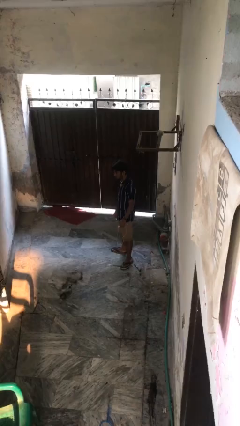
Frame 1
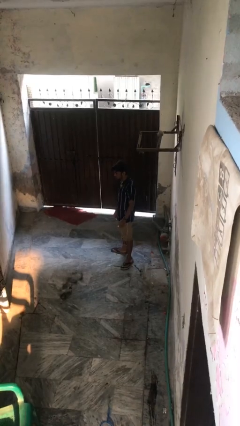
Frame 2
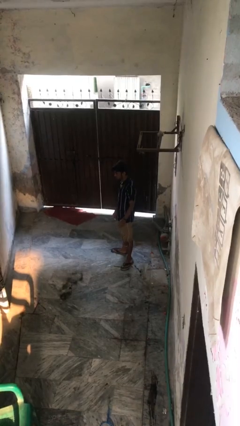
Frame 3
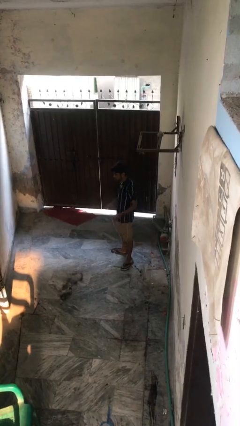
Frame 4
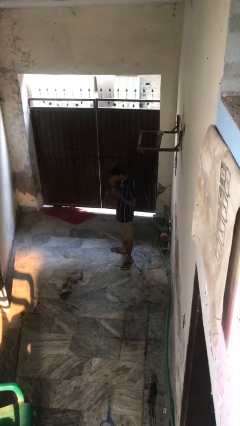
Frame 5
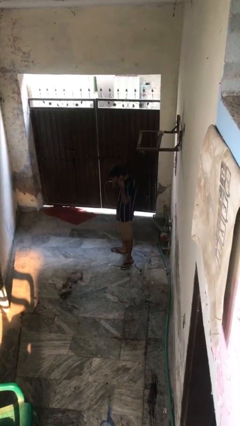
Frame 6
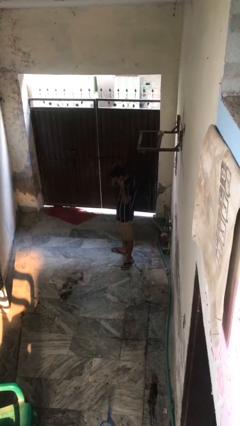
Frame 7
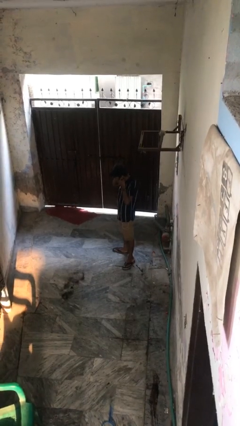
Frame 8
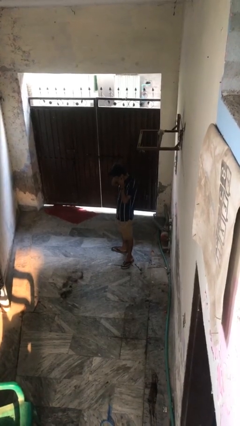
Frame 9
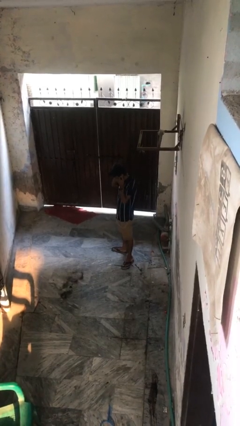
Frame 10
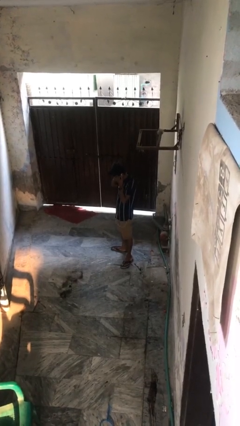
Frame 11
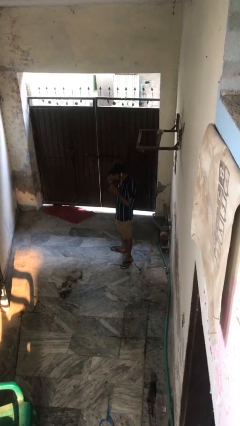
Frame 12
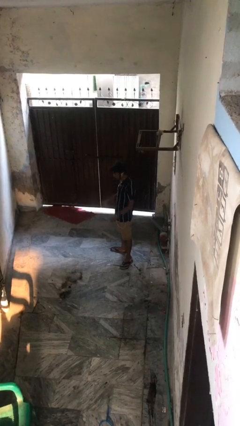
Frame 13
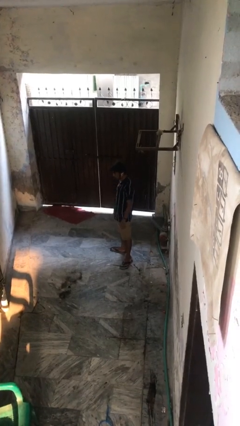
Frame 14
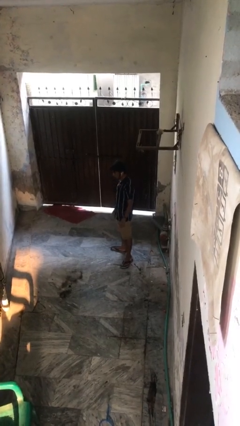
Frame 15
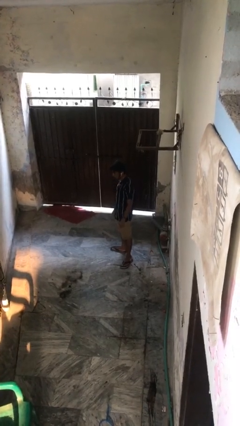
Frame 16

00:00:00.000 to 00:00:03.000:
person puts on headphones

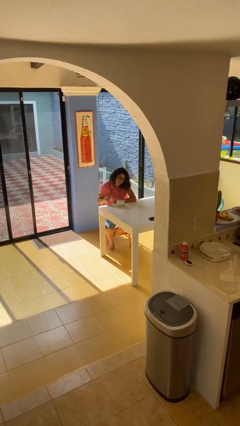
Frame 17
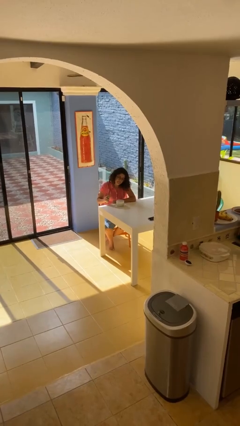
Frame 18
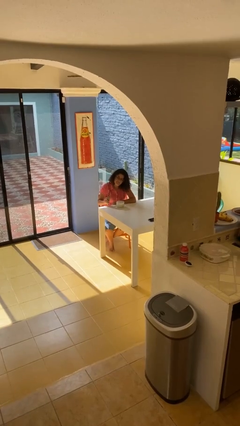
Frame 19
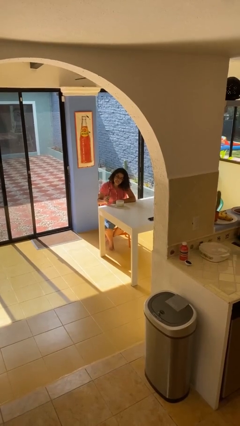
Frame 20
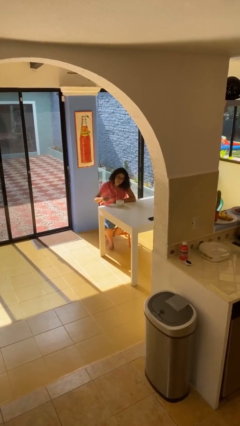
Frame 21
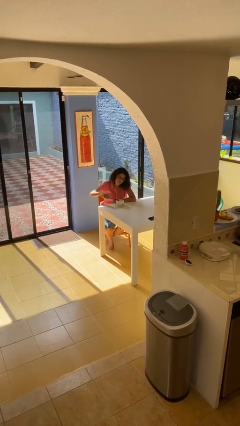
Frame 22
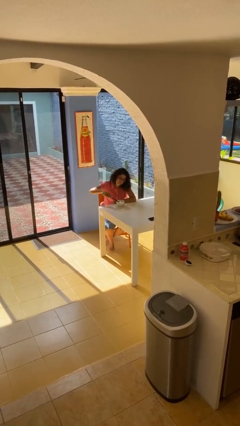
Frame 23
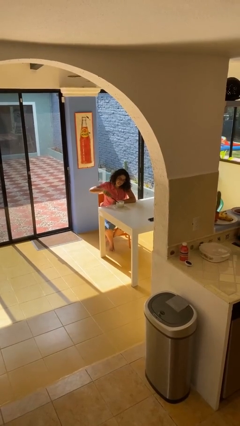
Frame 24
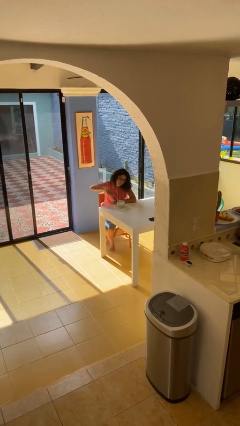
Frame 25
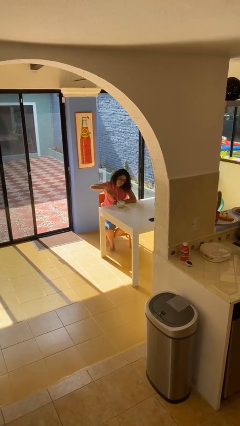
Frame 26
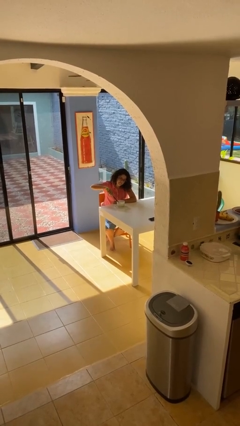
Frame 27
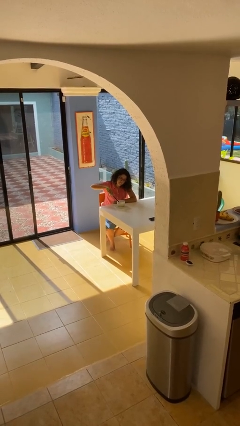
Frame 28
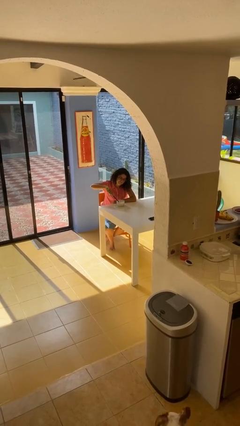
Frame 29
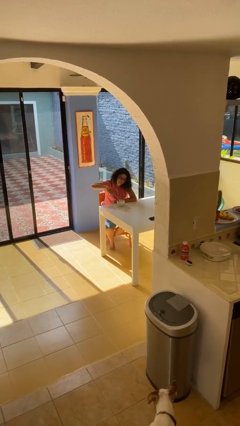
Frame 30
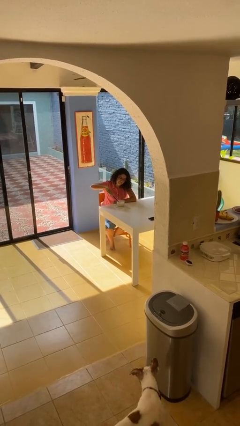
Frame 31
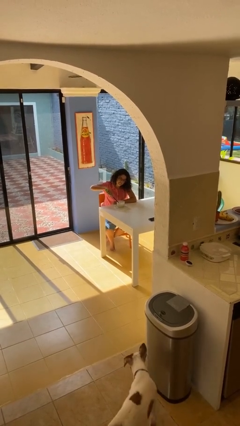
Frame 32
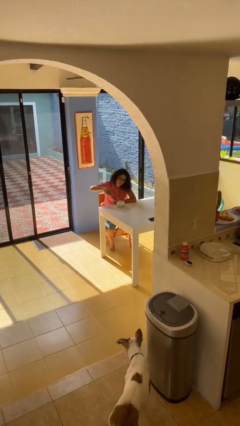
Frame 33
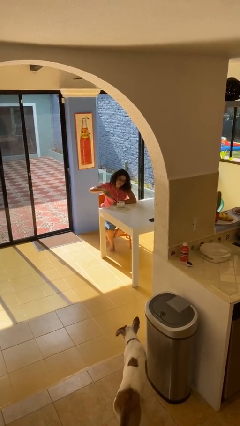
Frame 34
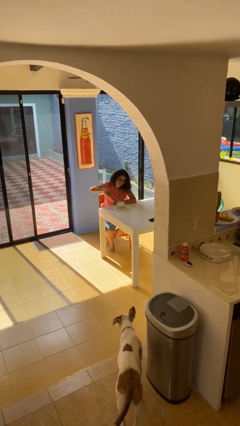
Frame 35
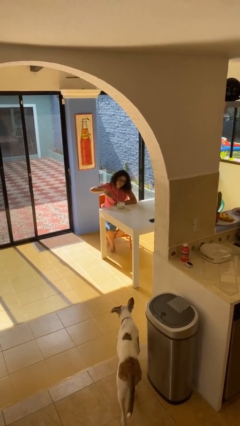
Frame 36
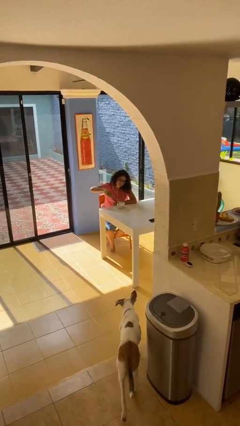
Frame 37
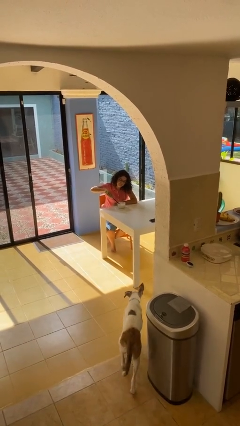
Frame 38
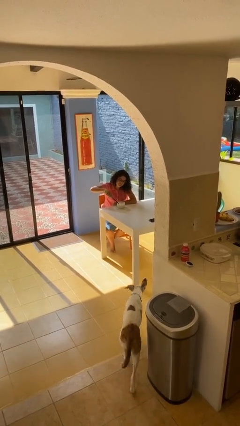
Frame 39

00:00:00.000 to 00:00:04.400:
person lights candle

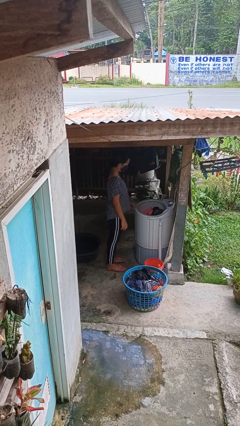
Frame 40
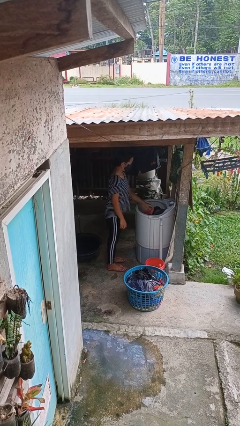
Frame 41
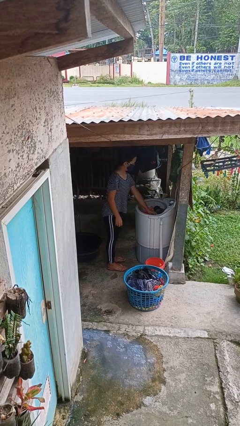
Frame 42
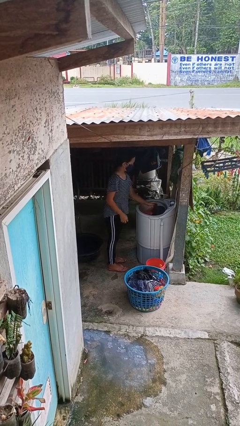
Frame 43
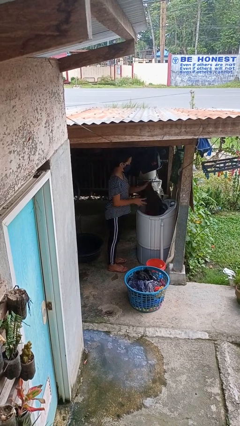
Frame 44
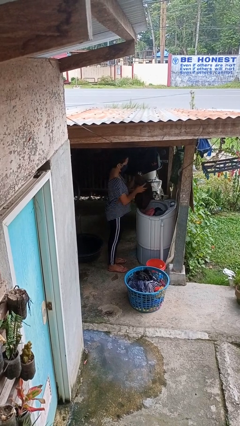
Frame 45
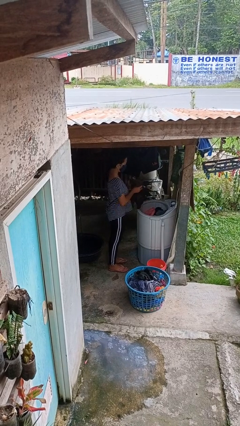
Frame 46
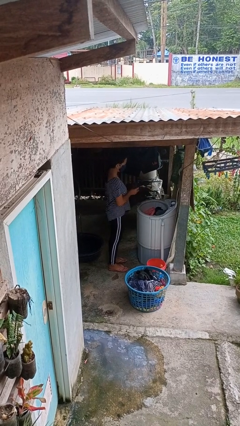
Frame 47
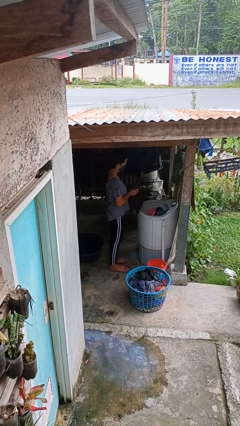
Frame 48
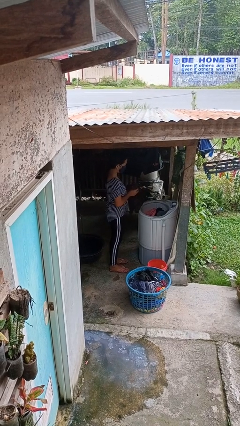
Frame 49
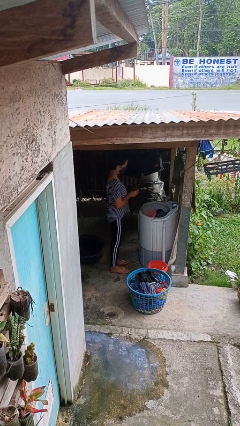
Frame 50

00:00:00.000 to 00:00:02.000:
person unloads clotheswasher

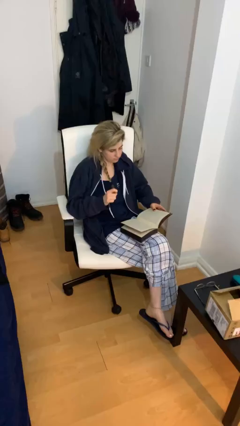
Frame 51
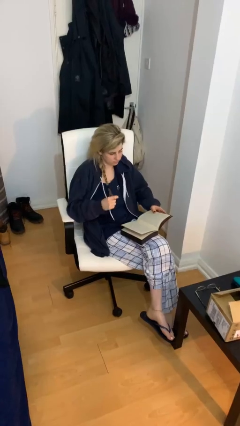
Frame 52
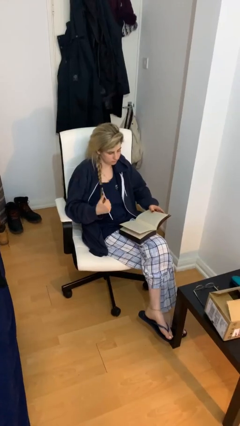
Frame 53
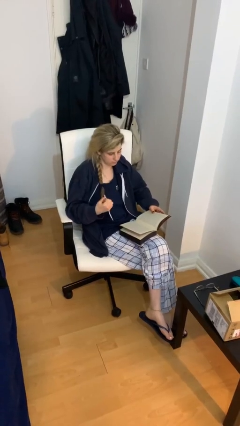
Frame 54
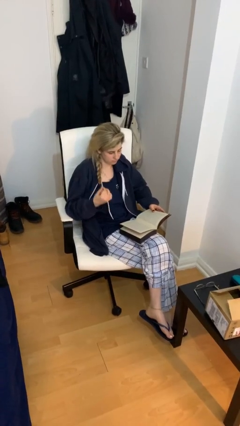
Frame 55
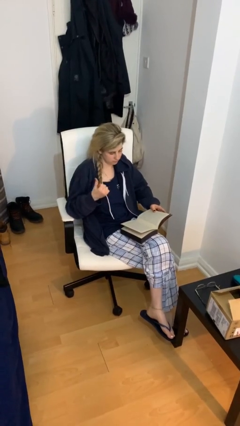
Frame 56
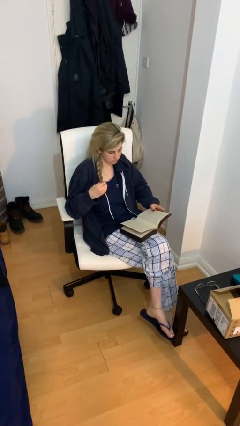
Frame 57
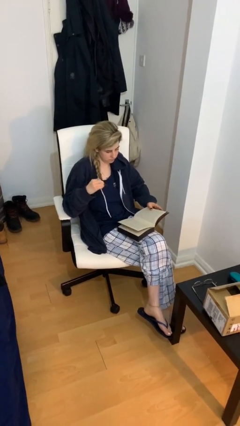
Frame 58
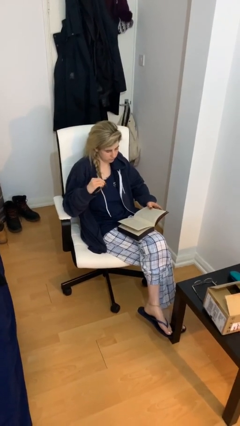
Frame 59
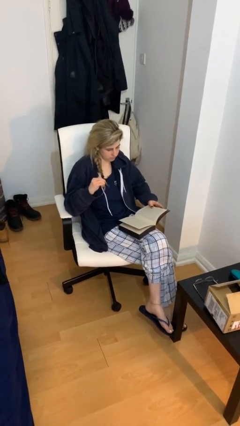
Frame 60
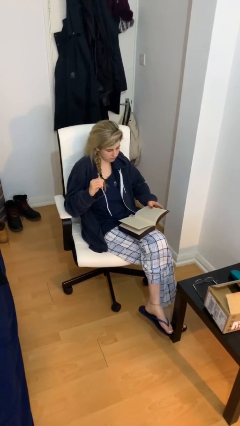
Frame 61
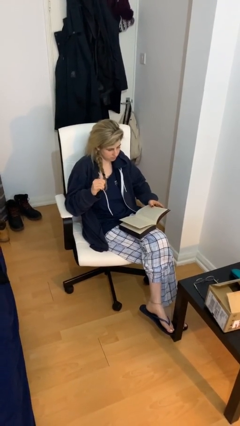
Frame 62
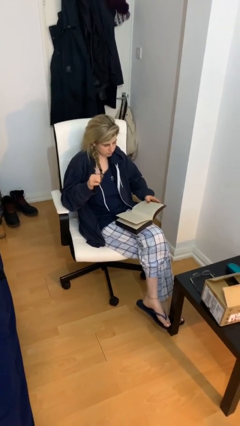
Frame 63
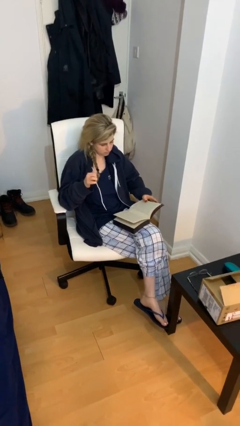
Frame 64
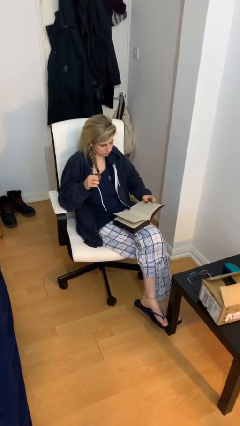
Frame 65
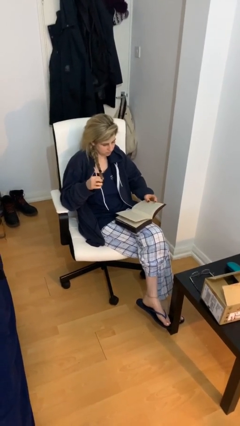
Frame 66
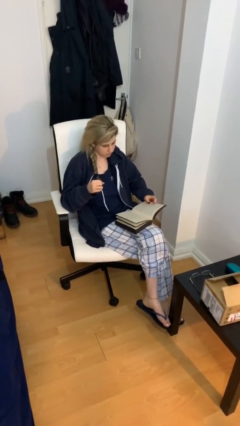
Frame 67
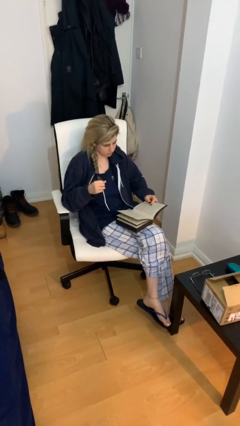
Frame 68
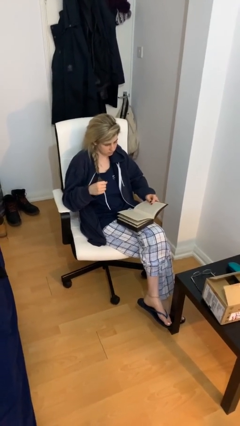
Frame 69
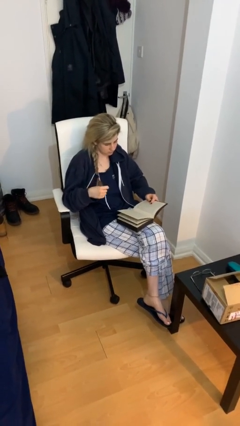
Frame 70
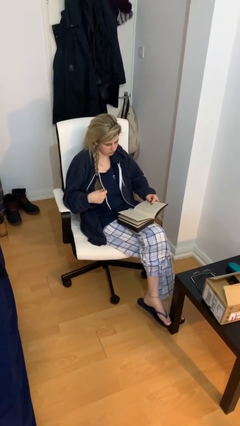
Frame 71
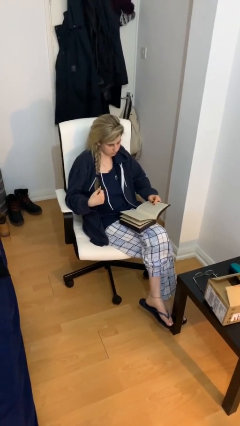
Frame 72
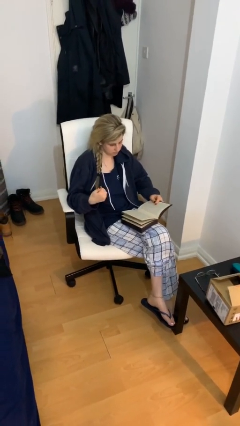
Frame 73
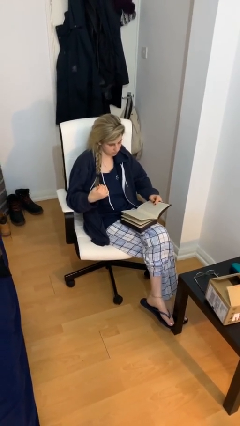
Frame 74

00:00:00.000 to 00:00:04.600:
person reads document

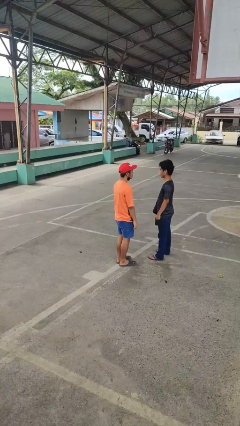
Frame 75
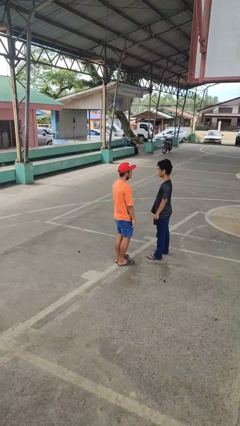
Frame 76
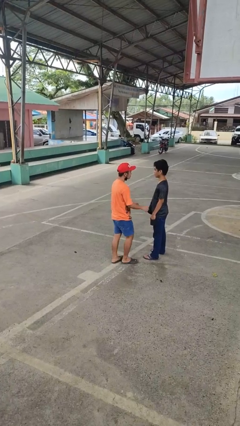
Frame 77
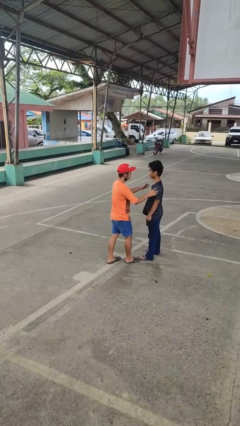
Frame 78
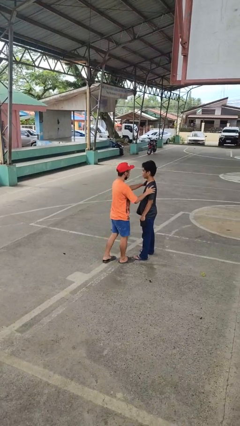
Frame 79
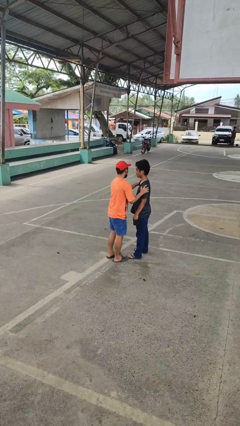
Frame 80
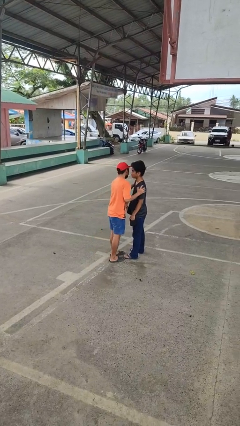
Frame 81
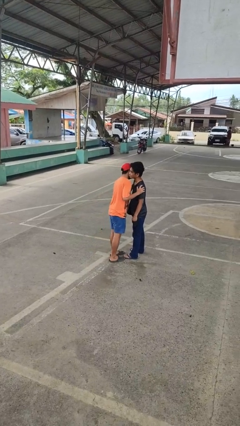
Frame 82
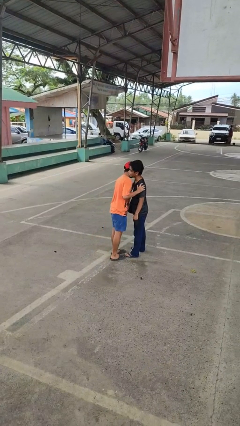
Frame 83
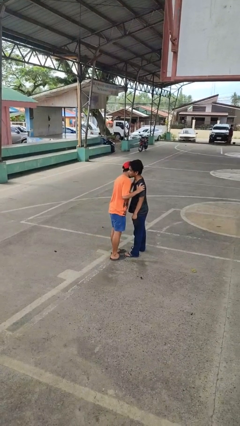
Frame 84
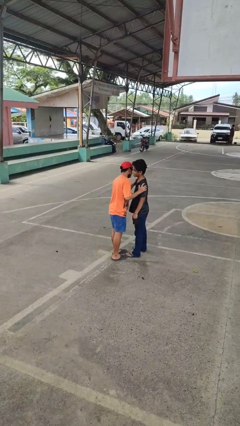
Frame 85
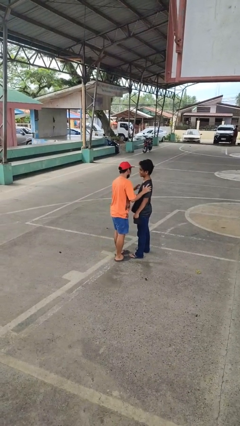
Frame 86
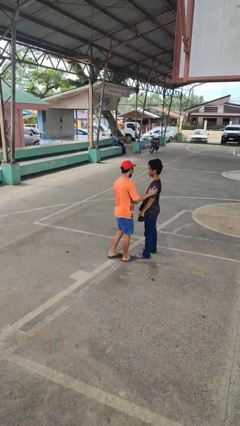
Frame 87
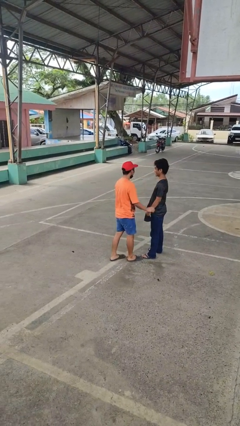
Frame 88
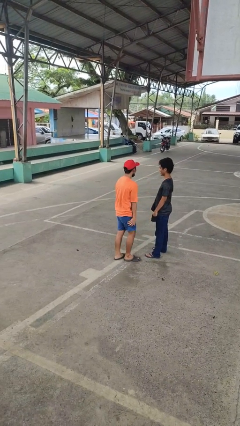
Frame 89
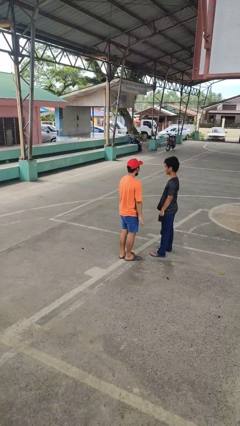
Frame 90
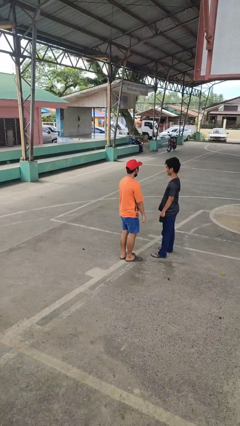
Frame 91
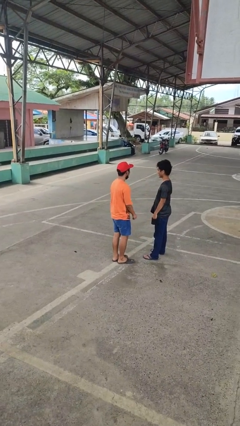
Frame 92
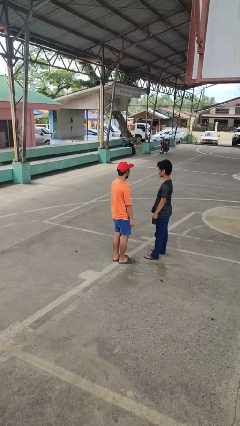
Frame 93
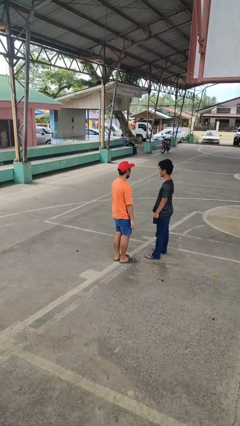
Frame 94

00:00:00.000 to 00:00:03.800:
person kisses cheek of person
